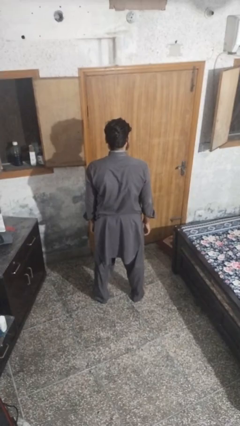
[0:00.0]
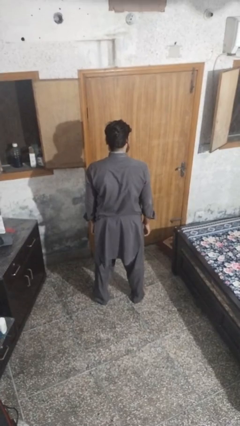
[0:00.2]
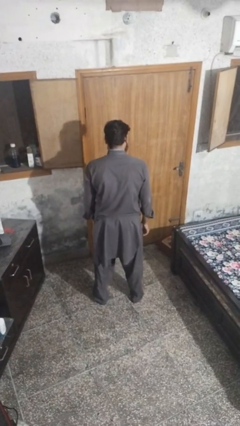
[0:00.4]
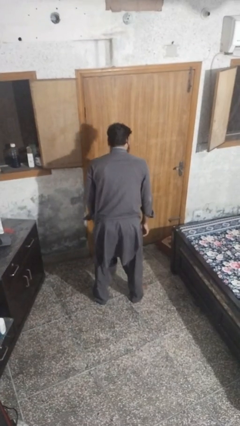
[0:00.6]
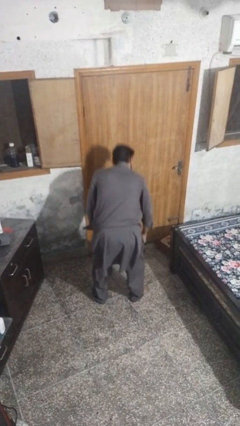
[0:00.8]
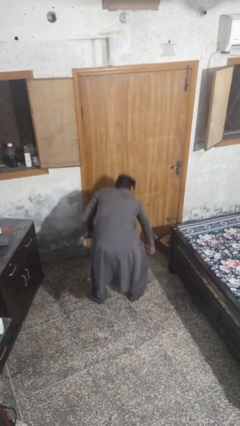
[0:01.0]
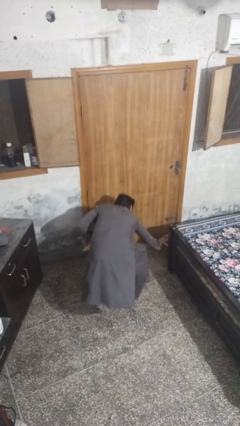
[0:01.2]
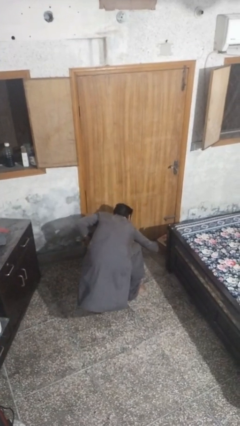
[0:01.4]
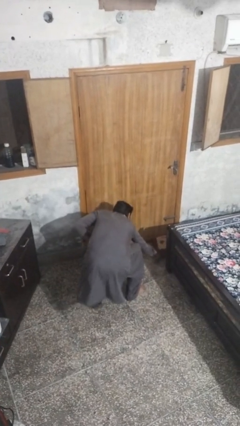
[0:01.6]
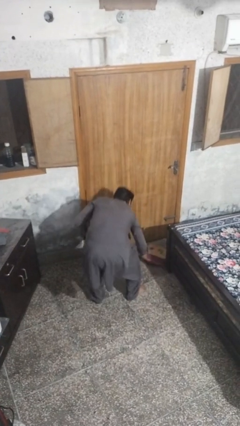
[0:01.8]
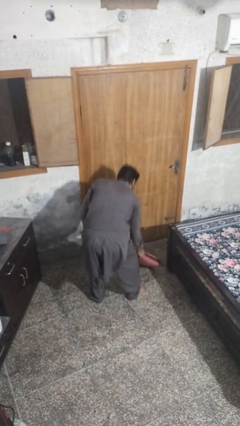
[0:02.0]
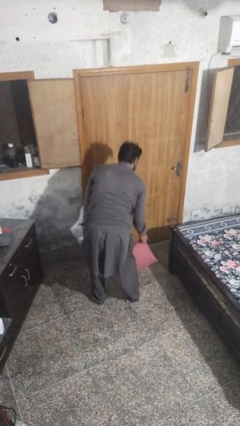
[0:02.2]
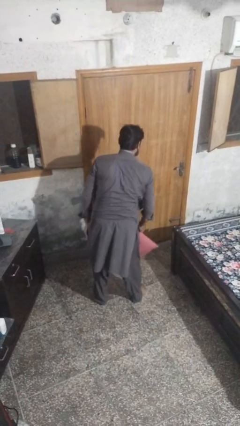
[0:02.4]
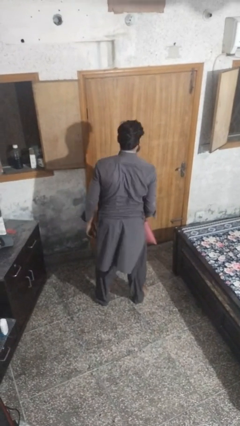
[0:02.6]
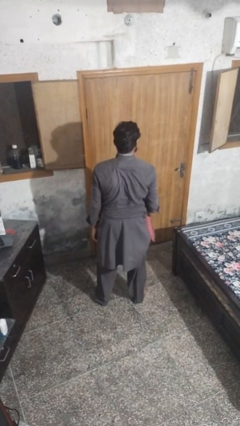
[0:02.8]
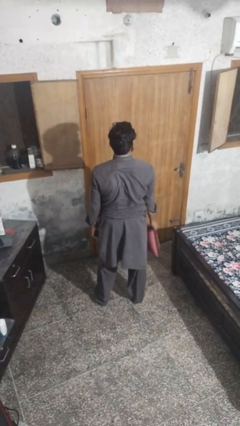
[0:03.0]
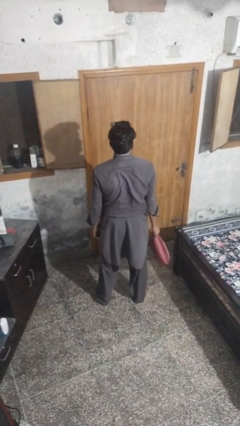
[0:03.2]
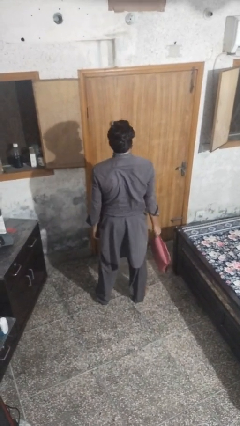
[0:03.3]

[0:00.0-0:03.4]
person picks up object from floor

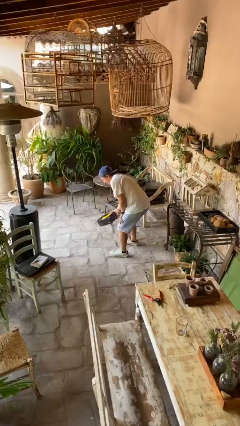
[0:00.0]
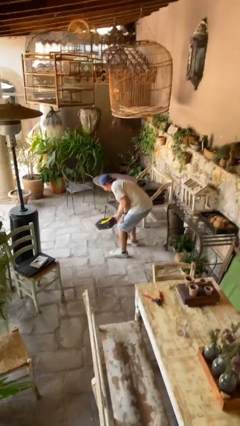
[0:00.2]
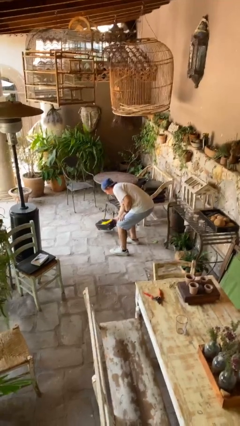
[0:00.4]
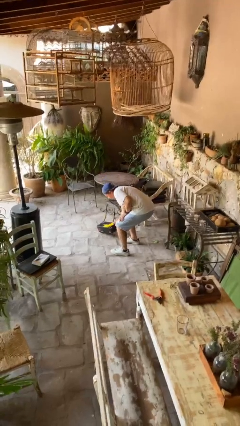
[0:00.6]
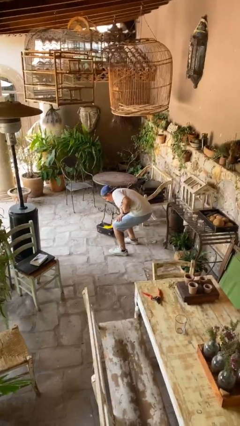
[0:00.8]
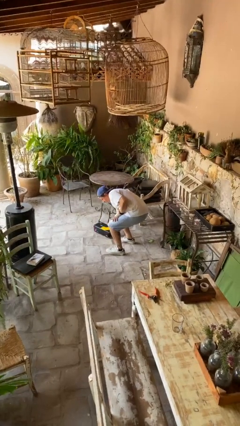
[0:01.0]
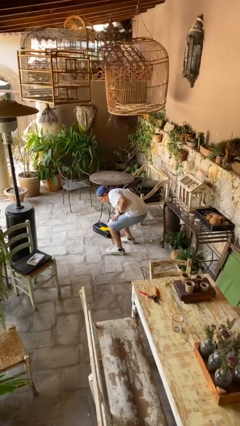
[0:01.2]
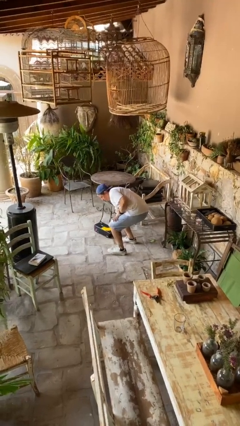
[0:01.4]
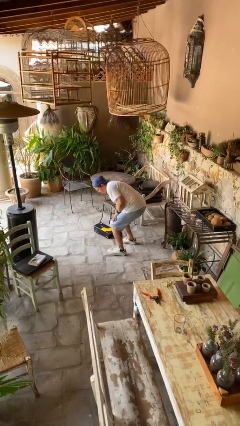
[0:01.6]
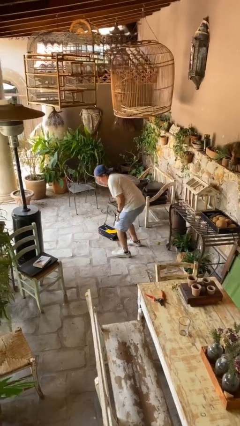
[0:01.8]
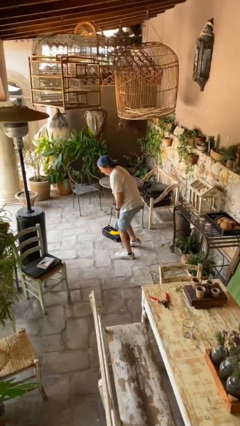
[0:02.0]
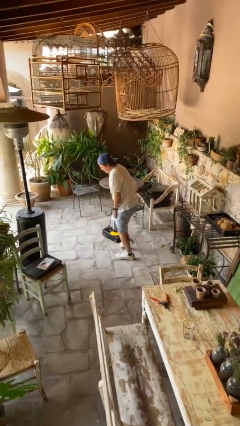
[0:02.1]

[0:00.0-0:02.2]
person puts down object on floor

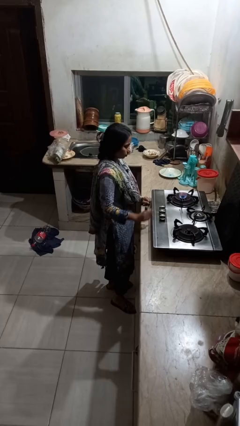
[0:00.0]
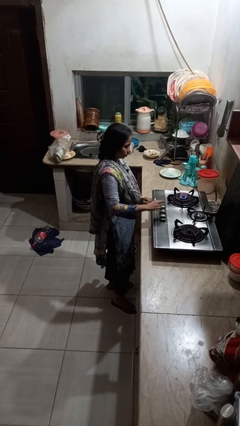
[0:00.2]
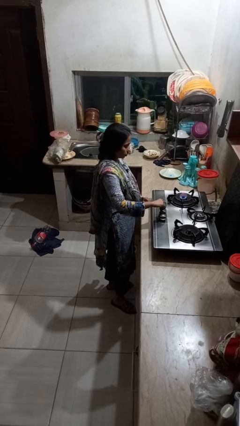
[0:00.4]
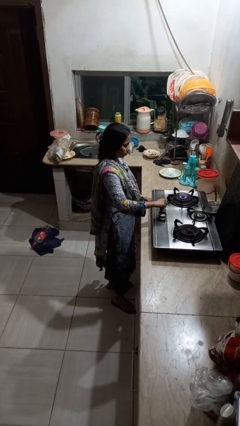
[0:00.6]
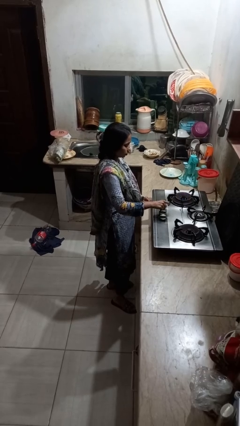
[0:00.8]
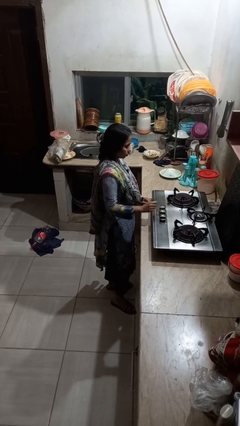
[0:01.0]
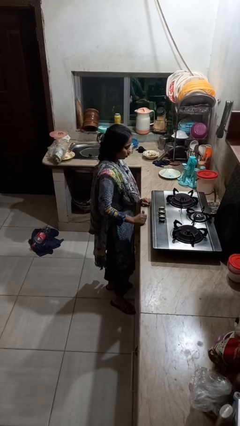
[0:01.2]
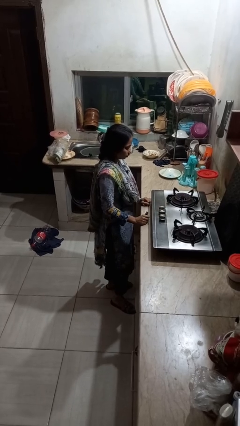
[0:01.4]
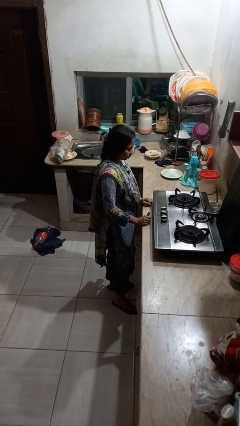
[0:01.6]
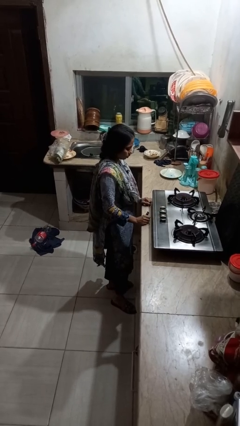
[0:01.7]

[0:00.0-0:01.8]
person turns off stovetop

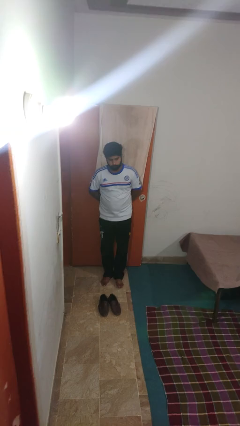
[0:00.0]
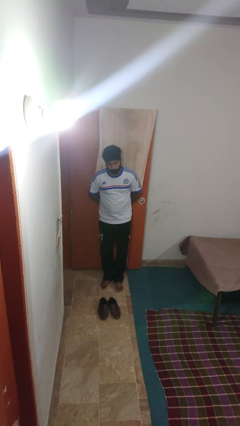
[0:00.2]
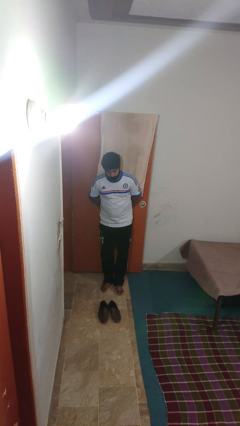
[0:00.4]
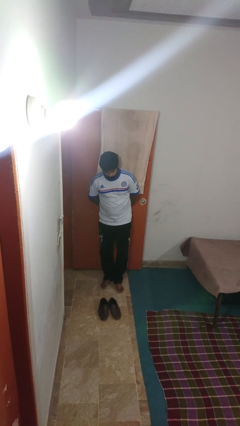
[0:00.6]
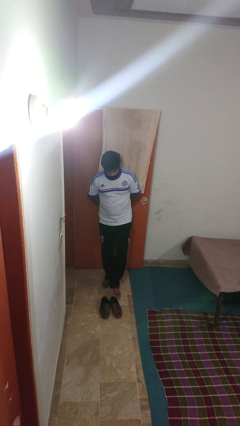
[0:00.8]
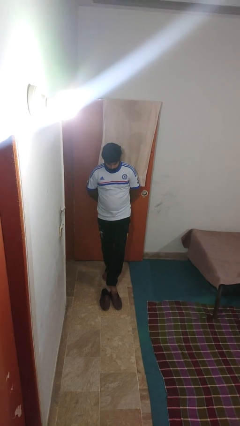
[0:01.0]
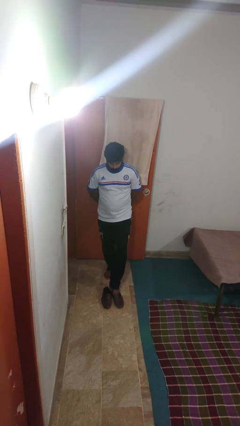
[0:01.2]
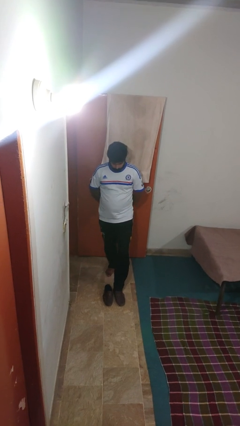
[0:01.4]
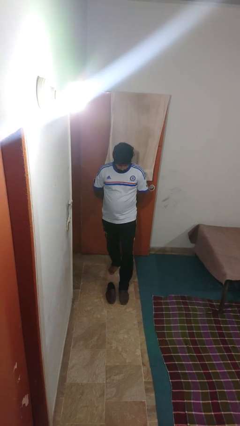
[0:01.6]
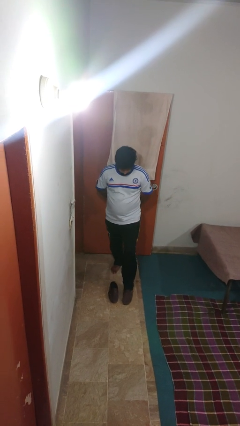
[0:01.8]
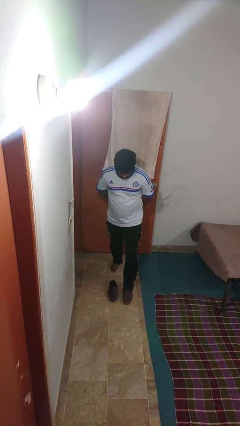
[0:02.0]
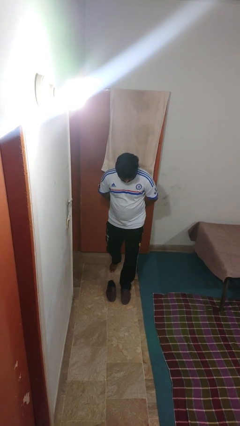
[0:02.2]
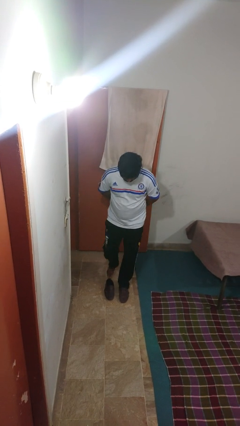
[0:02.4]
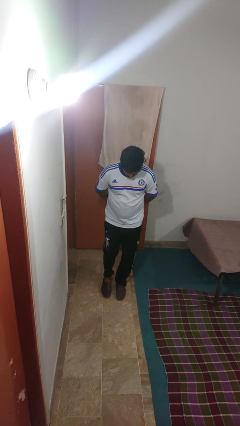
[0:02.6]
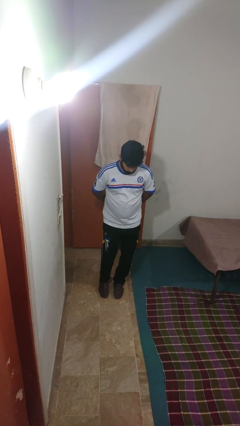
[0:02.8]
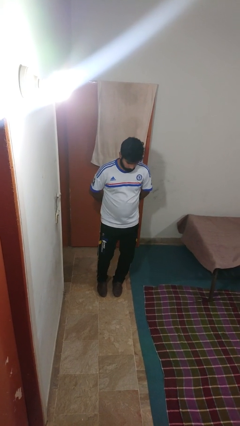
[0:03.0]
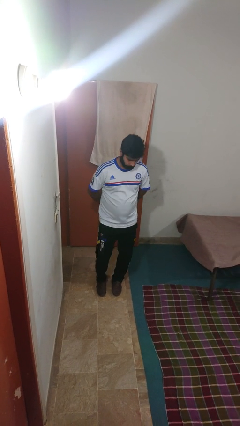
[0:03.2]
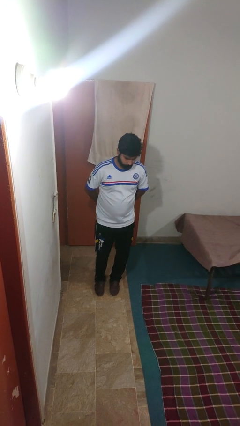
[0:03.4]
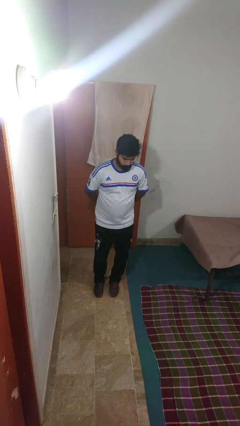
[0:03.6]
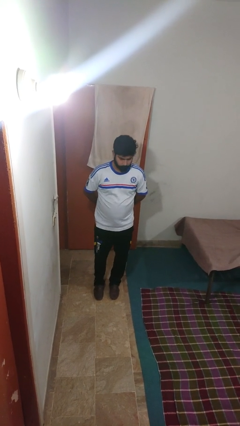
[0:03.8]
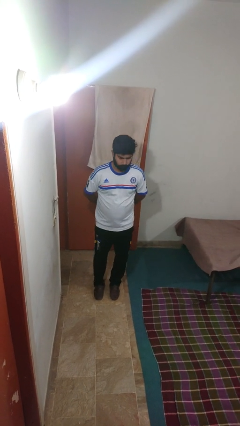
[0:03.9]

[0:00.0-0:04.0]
person puts on shoes

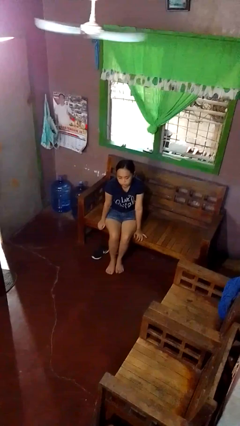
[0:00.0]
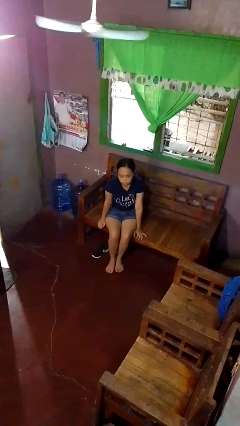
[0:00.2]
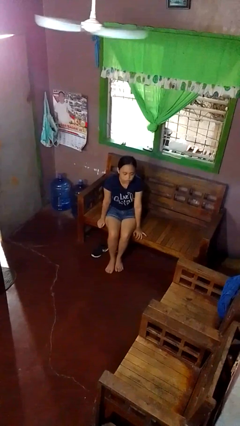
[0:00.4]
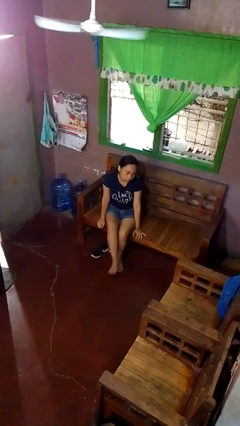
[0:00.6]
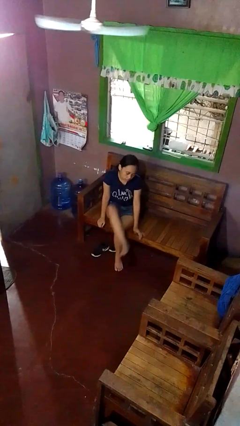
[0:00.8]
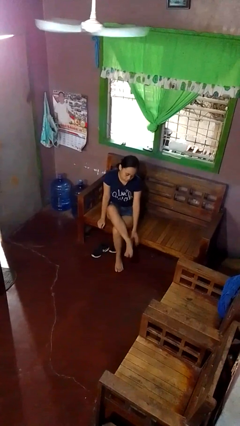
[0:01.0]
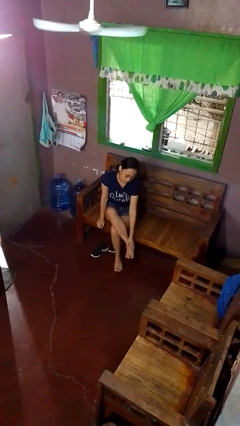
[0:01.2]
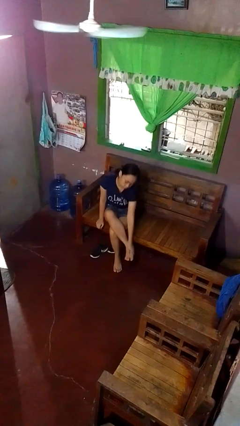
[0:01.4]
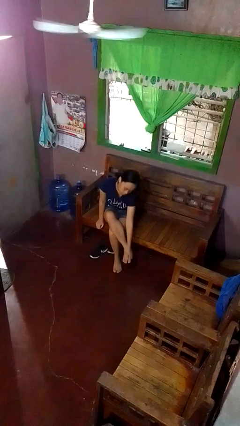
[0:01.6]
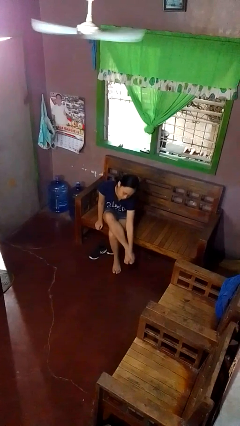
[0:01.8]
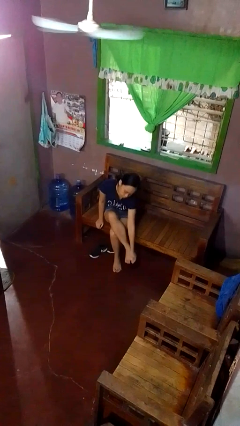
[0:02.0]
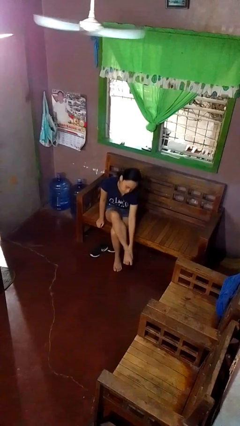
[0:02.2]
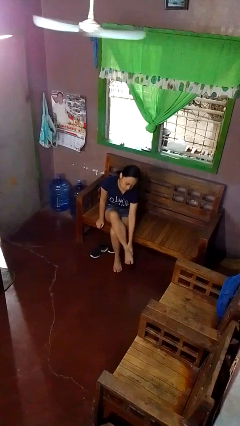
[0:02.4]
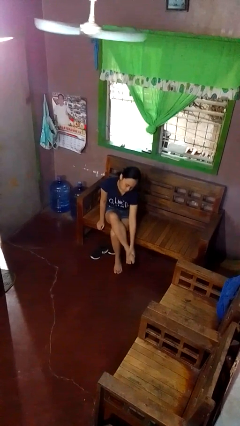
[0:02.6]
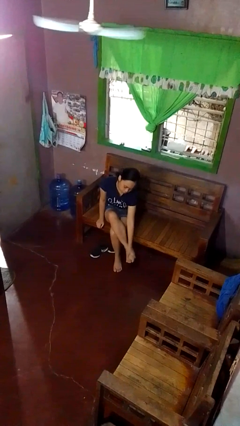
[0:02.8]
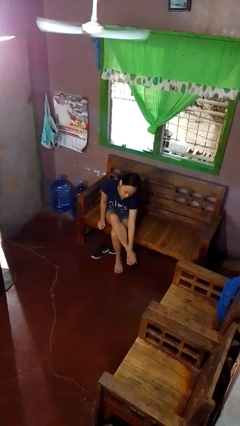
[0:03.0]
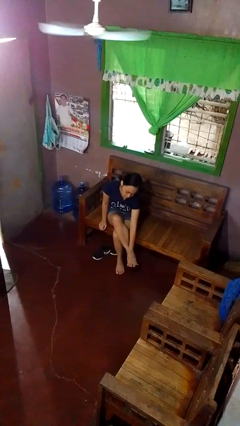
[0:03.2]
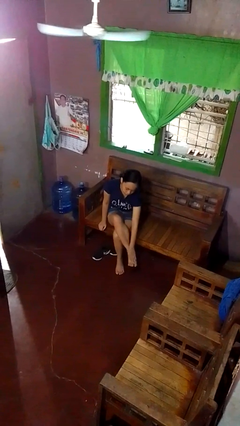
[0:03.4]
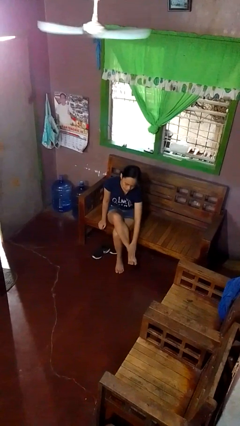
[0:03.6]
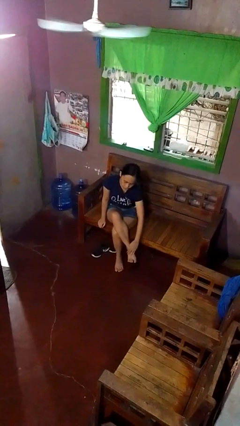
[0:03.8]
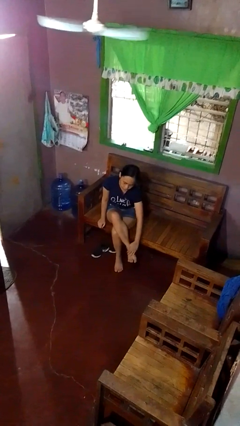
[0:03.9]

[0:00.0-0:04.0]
person rubs foot

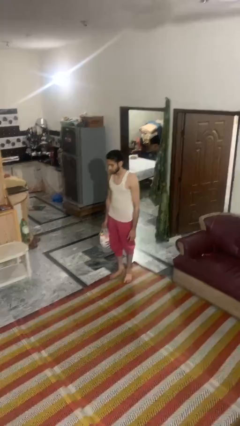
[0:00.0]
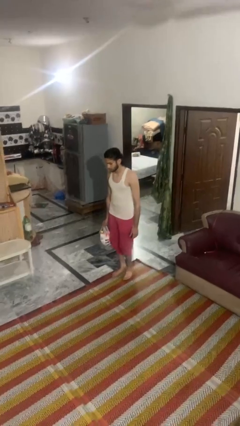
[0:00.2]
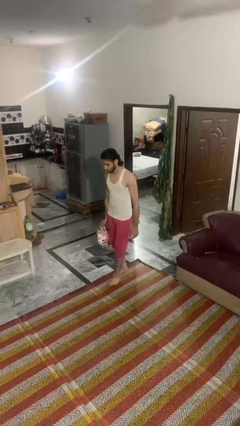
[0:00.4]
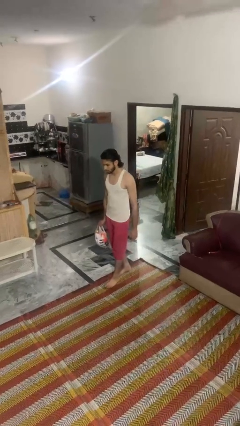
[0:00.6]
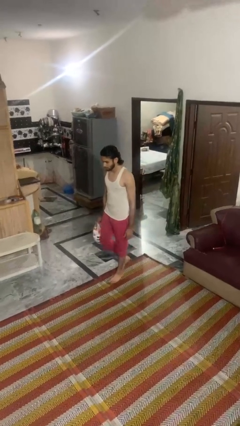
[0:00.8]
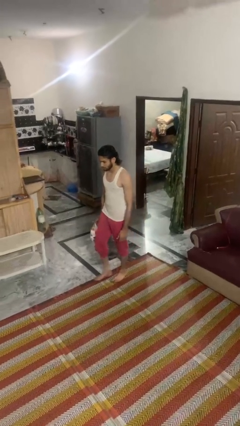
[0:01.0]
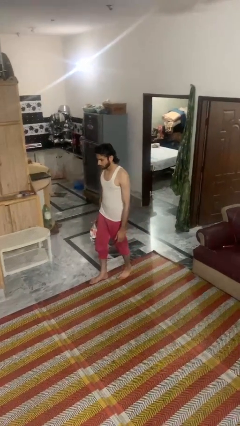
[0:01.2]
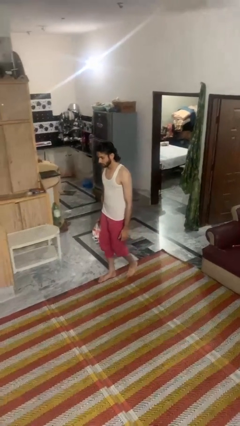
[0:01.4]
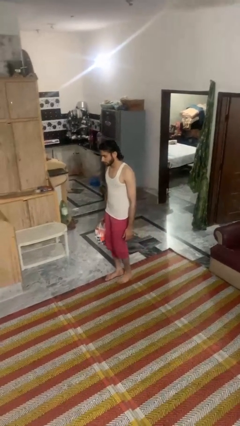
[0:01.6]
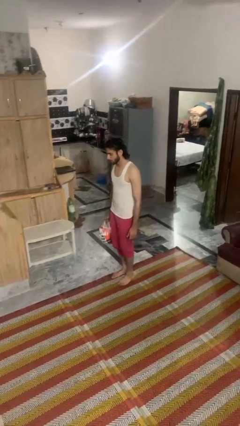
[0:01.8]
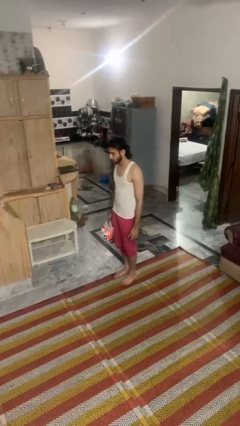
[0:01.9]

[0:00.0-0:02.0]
person carries groceries
